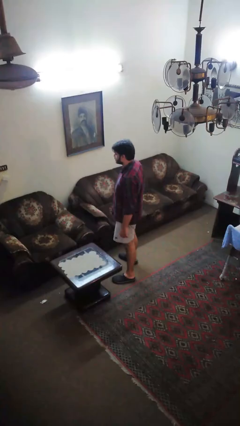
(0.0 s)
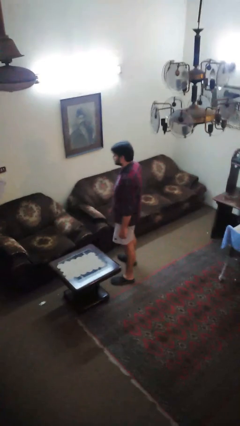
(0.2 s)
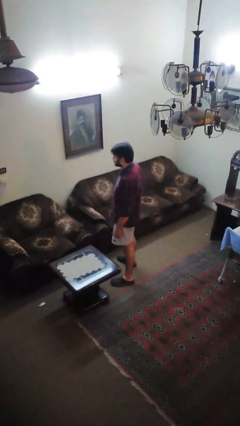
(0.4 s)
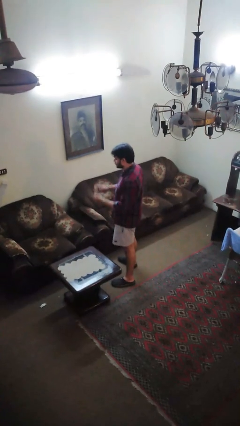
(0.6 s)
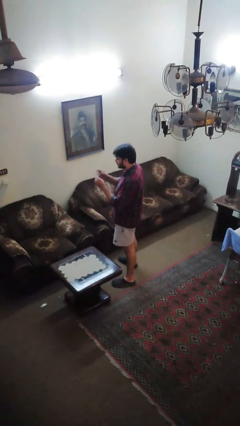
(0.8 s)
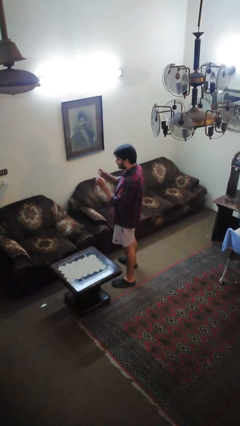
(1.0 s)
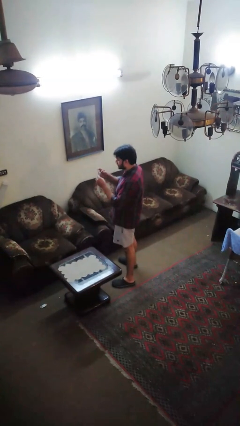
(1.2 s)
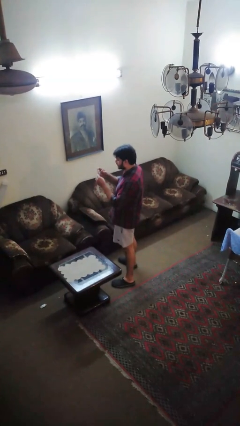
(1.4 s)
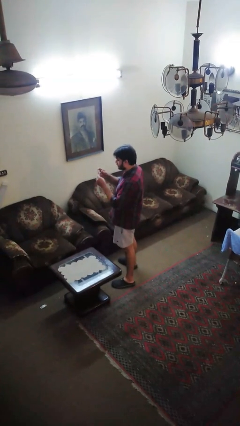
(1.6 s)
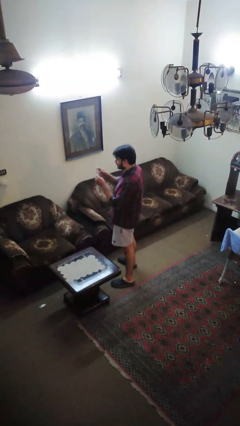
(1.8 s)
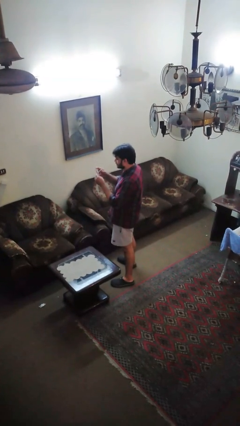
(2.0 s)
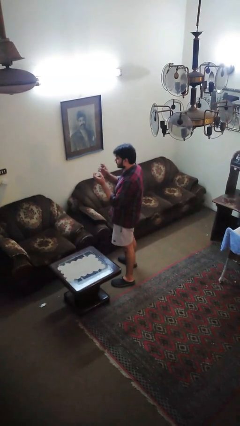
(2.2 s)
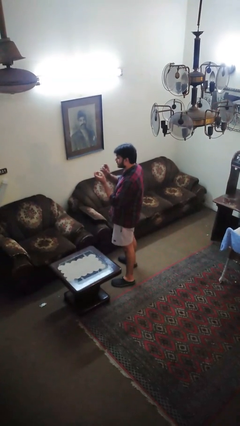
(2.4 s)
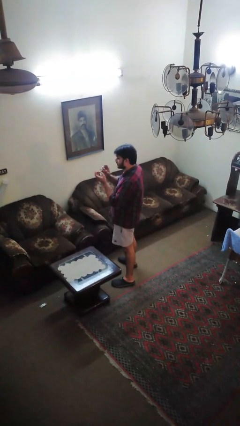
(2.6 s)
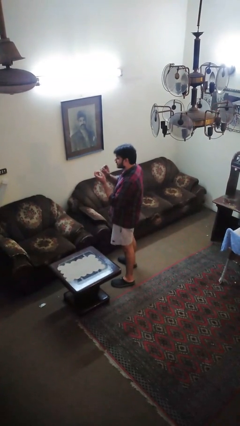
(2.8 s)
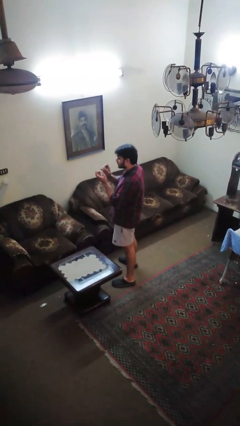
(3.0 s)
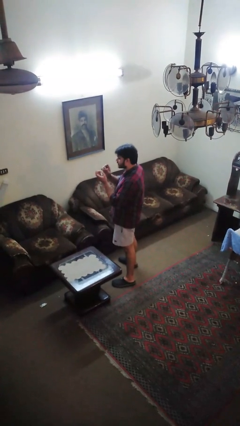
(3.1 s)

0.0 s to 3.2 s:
person clips fingernails

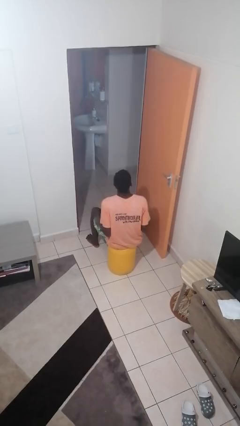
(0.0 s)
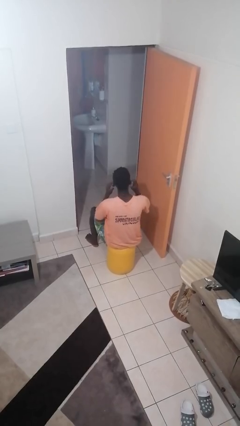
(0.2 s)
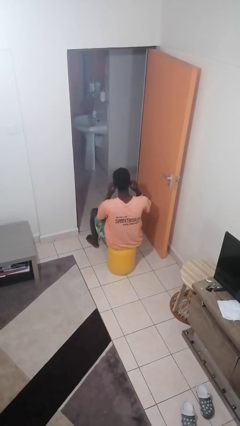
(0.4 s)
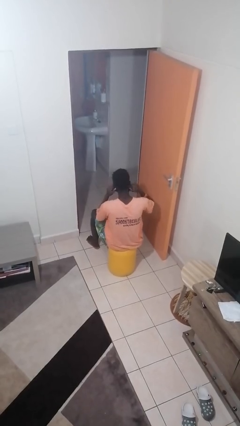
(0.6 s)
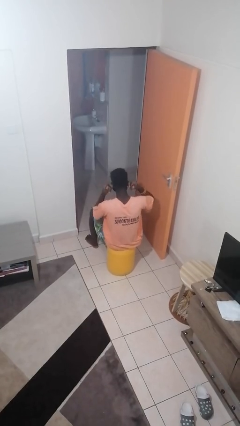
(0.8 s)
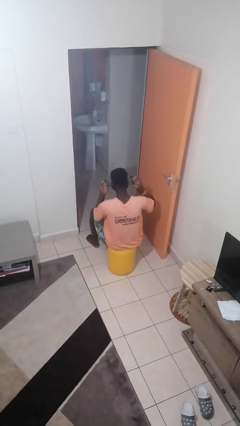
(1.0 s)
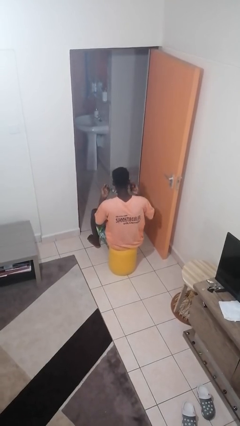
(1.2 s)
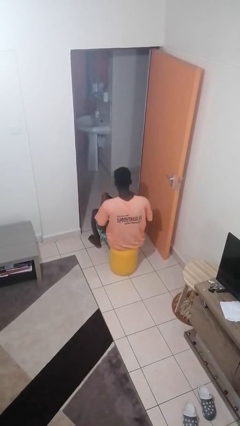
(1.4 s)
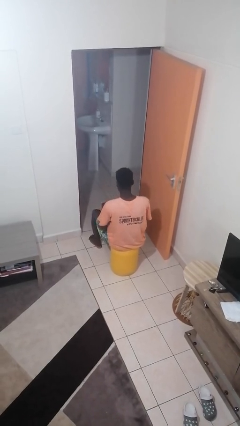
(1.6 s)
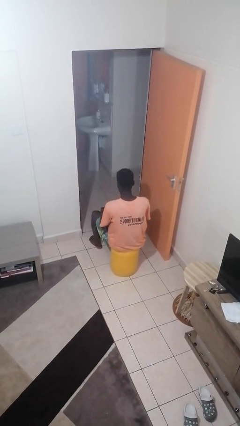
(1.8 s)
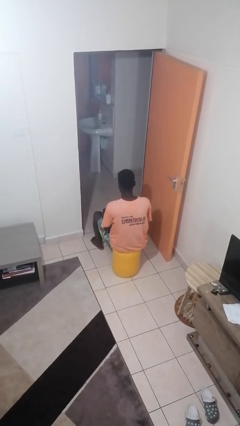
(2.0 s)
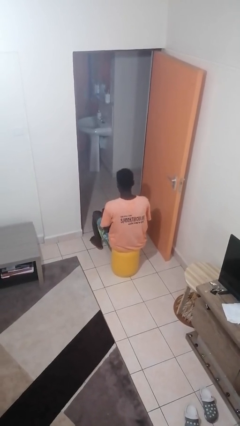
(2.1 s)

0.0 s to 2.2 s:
person takes off facemask

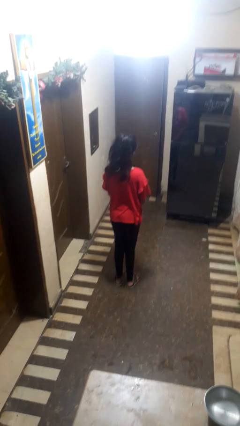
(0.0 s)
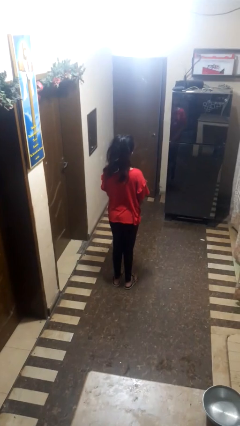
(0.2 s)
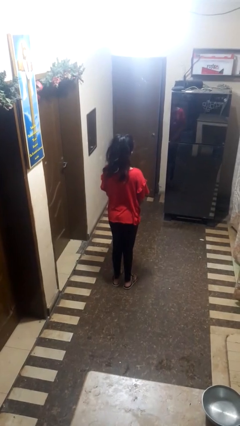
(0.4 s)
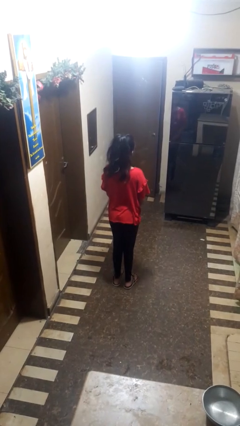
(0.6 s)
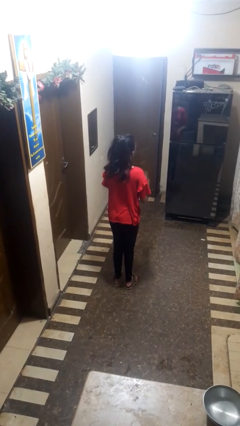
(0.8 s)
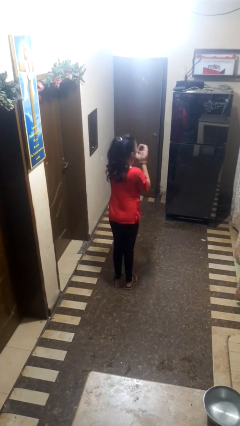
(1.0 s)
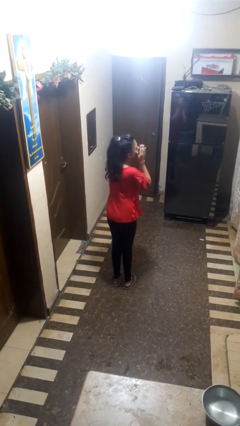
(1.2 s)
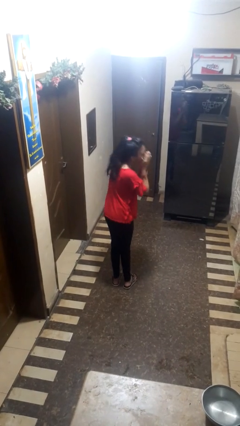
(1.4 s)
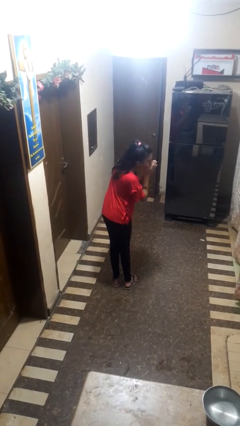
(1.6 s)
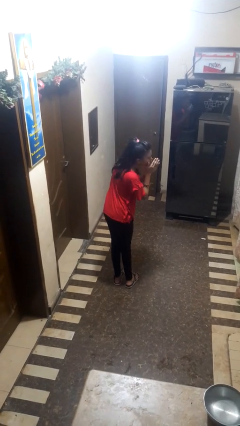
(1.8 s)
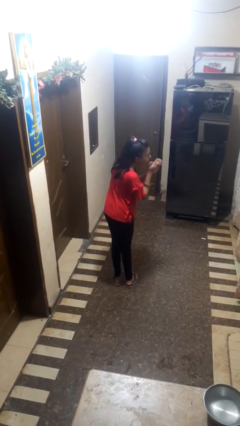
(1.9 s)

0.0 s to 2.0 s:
person sneezes into hand

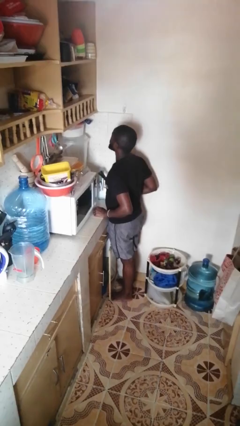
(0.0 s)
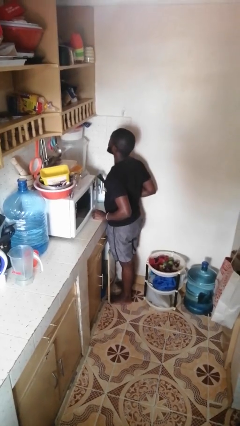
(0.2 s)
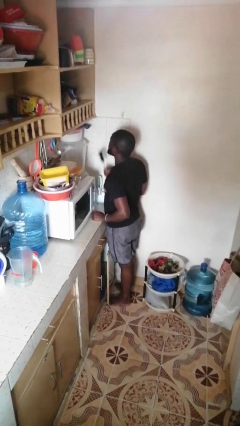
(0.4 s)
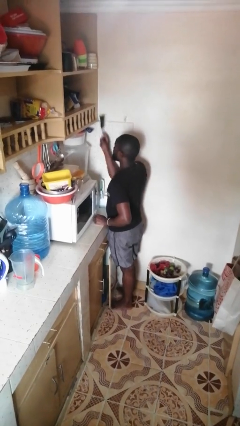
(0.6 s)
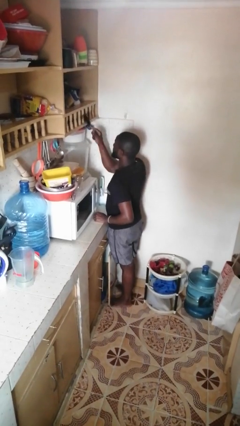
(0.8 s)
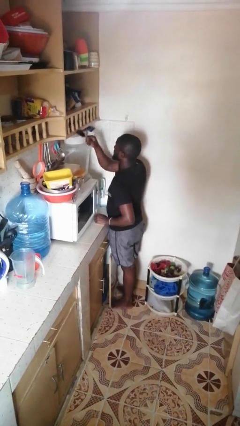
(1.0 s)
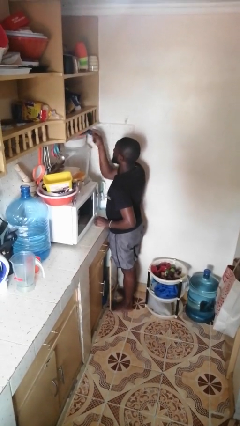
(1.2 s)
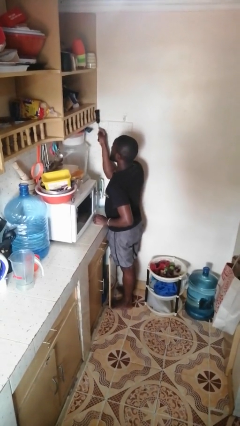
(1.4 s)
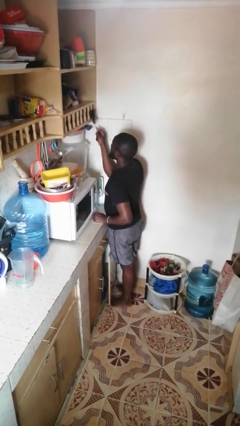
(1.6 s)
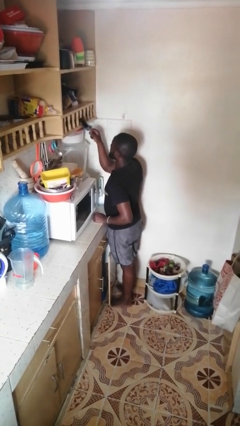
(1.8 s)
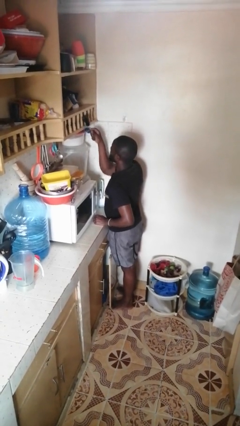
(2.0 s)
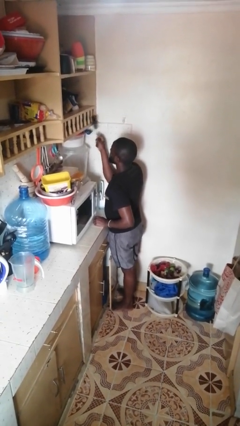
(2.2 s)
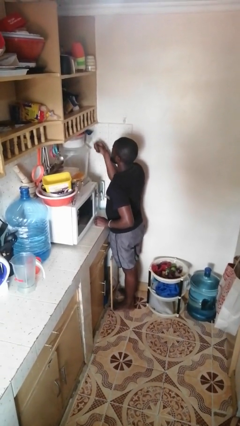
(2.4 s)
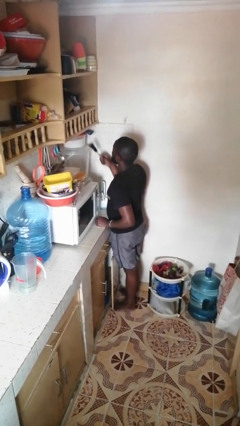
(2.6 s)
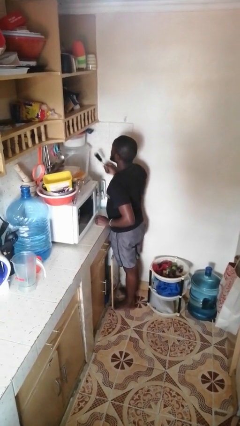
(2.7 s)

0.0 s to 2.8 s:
person dusts furniture

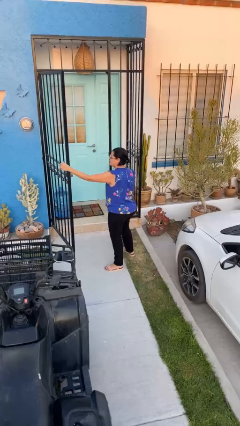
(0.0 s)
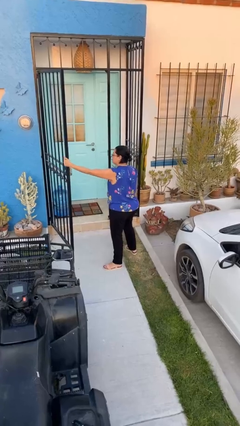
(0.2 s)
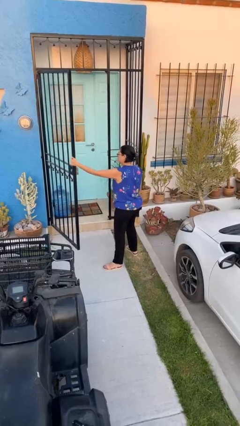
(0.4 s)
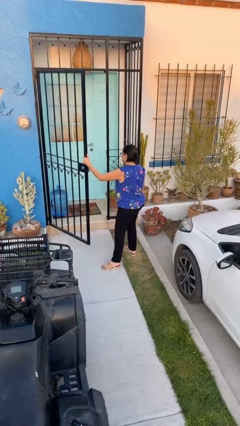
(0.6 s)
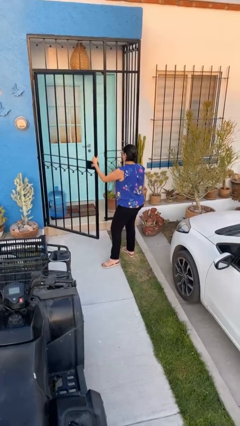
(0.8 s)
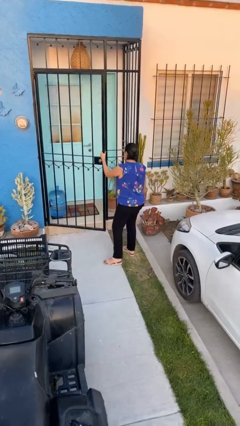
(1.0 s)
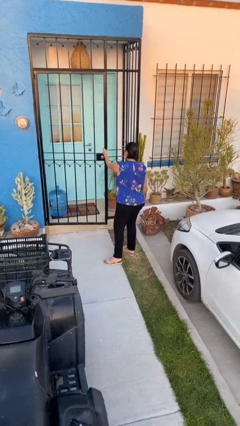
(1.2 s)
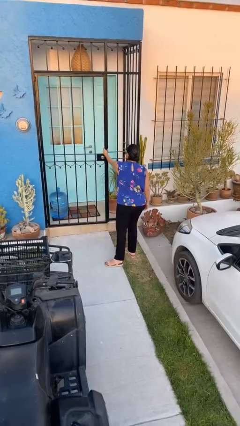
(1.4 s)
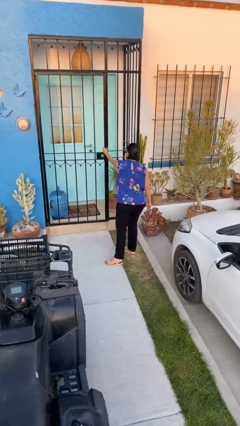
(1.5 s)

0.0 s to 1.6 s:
person closes facility door

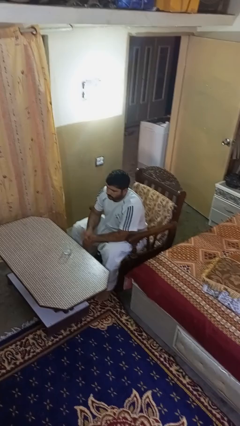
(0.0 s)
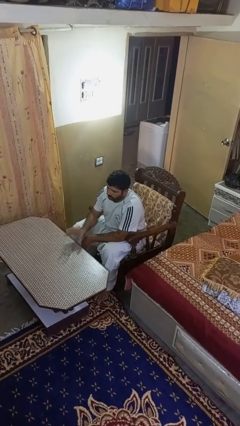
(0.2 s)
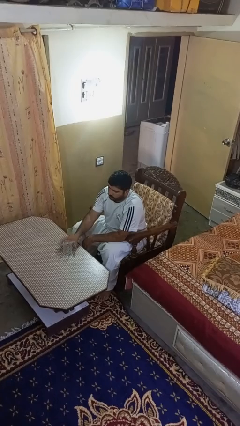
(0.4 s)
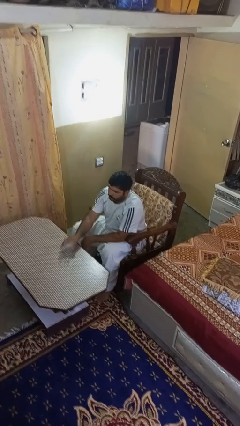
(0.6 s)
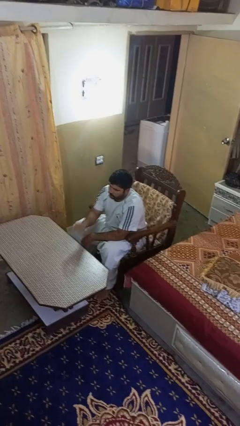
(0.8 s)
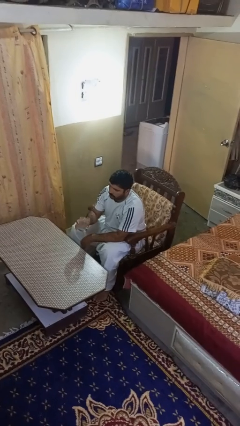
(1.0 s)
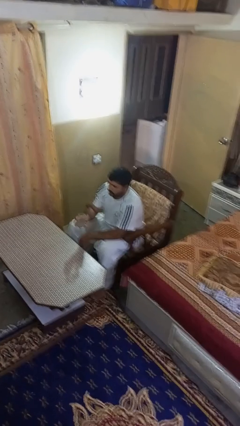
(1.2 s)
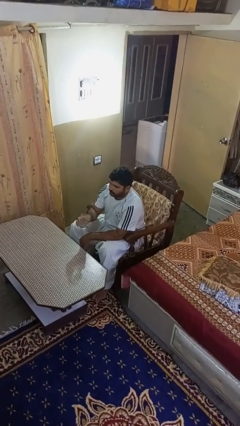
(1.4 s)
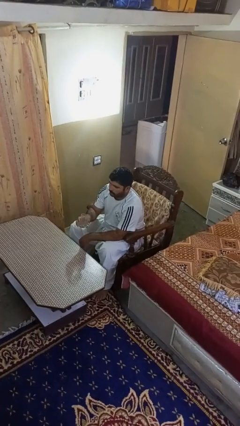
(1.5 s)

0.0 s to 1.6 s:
person picks up object from table

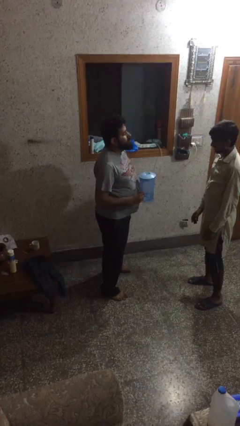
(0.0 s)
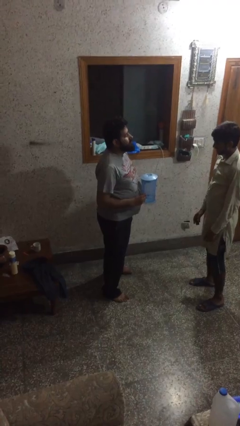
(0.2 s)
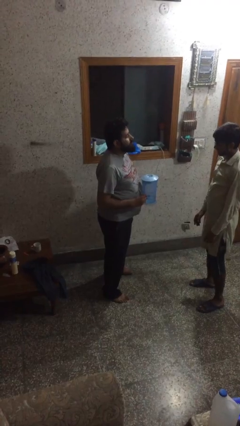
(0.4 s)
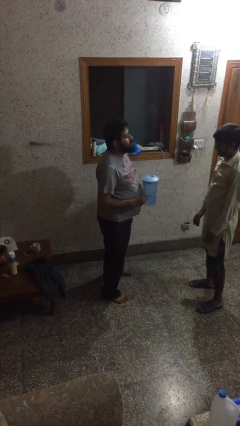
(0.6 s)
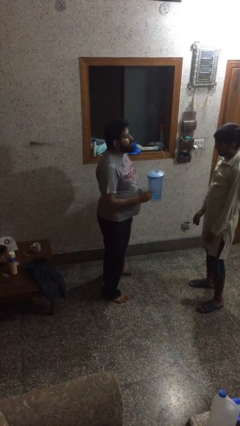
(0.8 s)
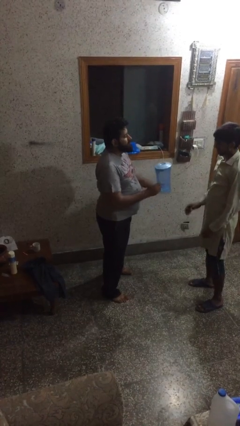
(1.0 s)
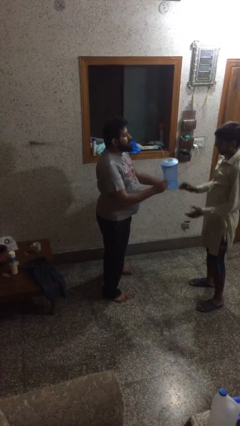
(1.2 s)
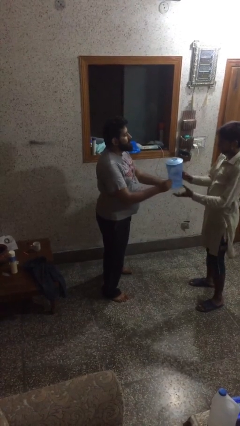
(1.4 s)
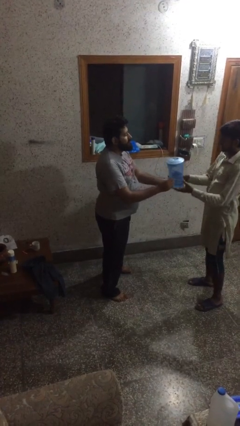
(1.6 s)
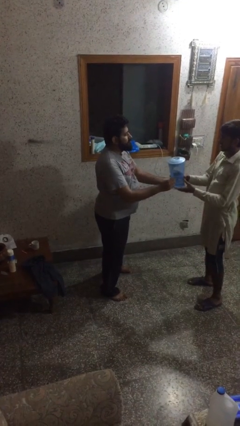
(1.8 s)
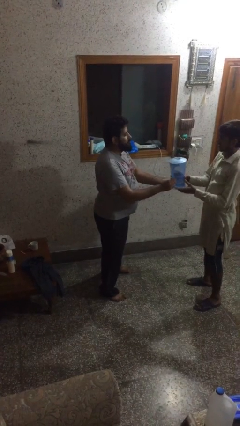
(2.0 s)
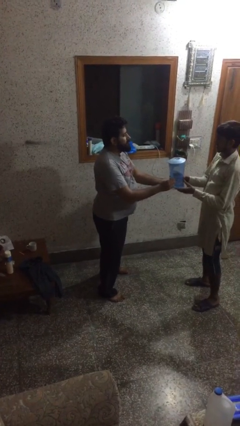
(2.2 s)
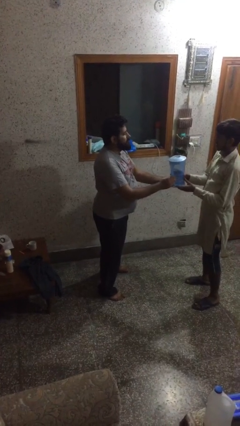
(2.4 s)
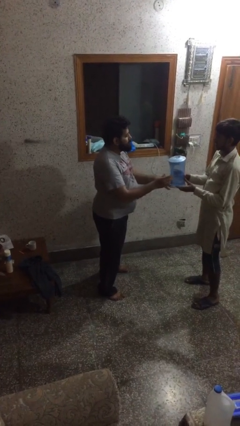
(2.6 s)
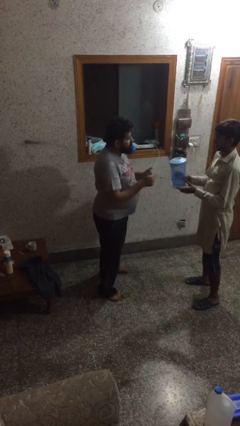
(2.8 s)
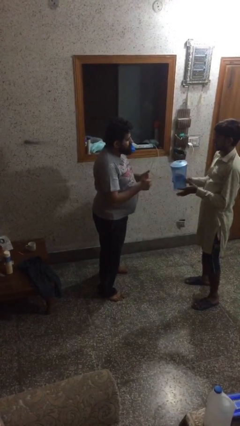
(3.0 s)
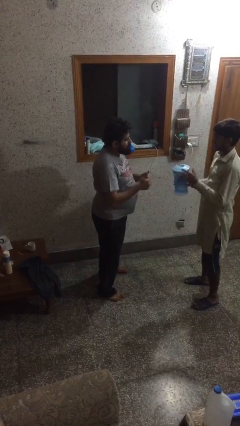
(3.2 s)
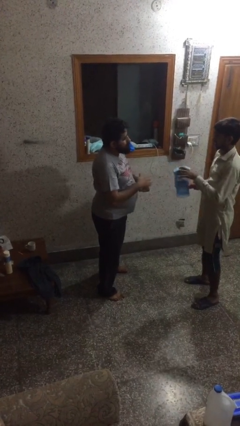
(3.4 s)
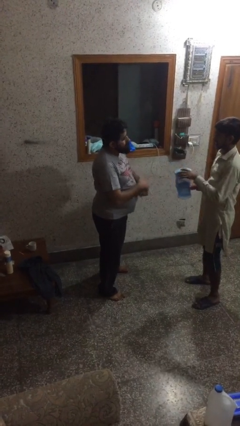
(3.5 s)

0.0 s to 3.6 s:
person transfers object to person

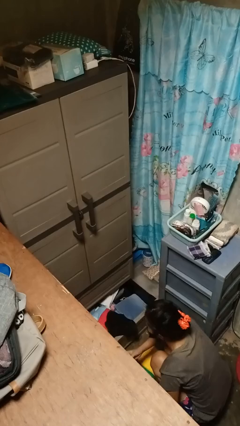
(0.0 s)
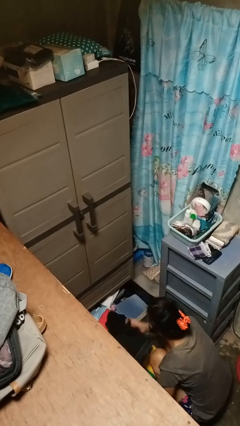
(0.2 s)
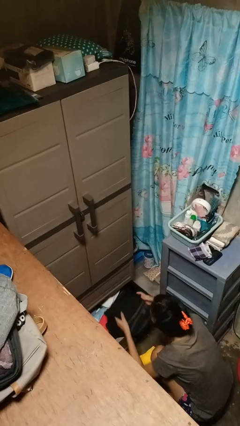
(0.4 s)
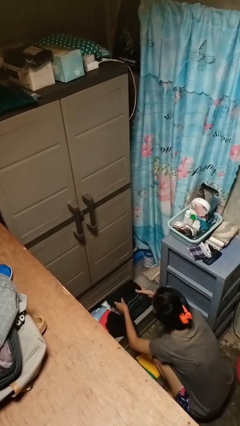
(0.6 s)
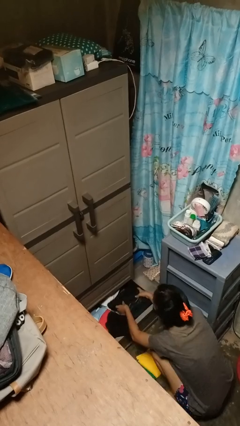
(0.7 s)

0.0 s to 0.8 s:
person puts clothes into dresser
